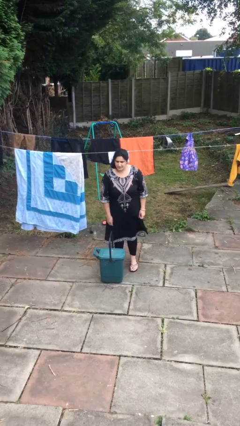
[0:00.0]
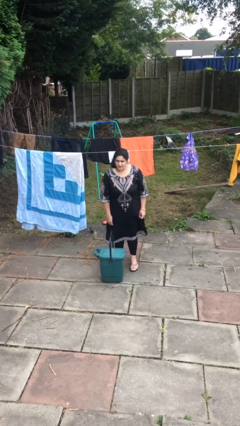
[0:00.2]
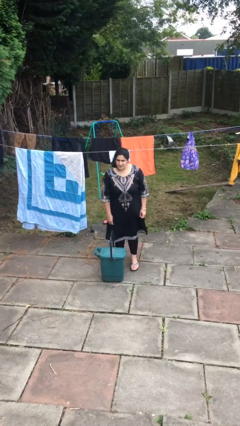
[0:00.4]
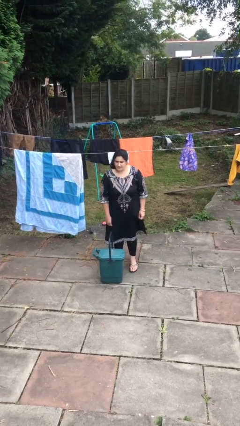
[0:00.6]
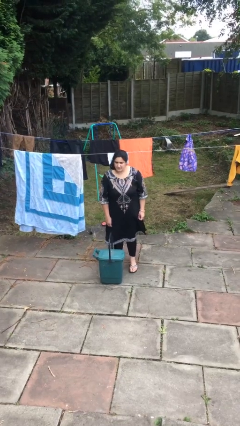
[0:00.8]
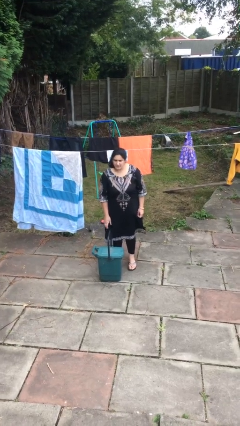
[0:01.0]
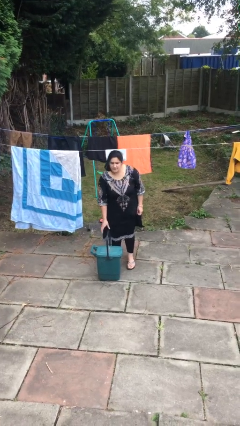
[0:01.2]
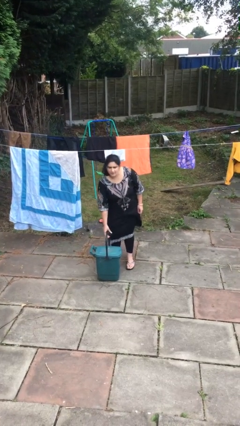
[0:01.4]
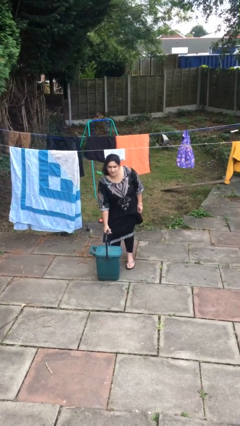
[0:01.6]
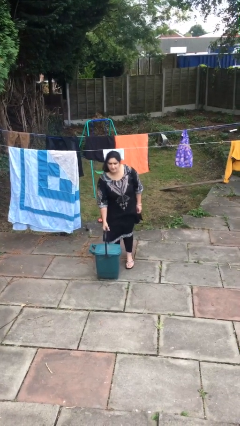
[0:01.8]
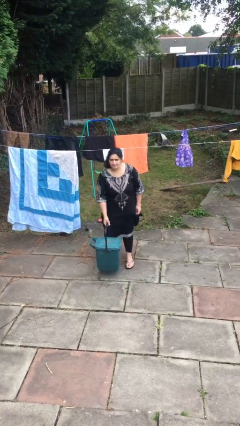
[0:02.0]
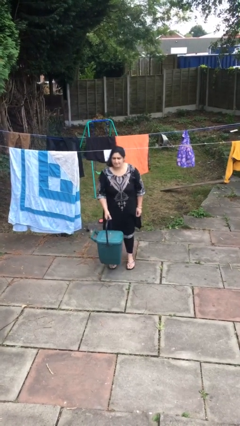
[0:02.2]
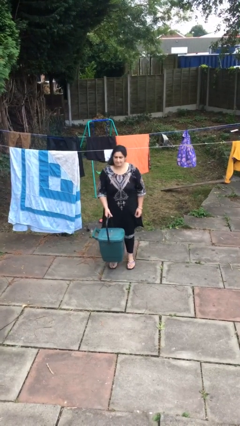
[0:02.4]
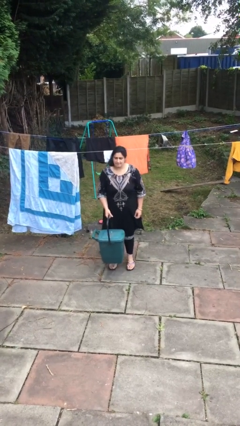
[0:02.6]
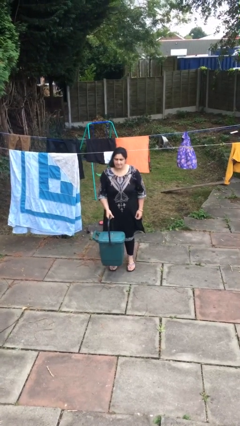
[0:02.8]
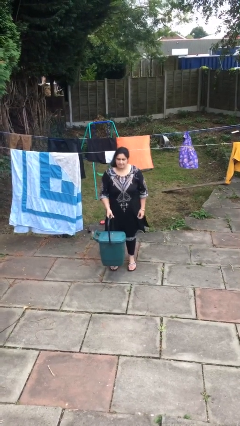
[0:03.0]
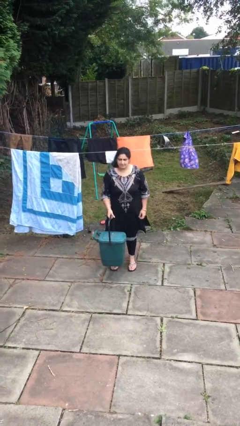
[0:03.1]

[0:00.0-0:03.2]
person picks up object from floor

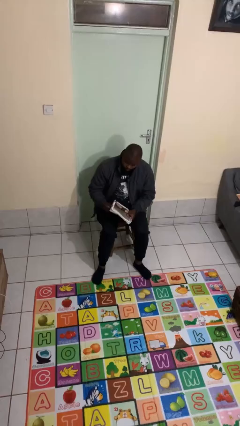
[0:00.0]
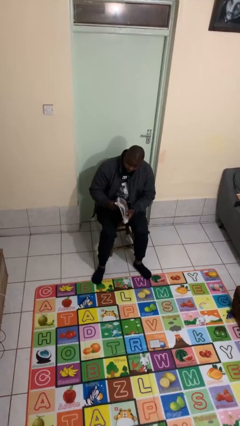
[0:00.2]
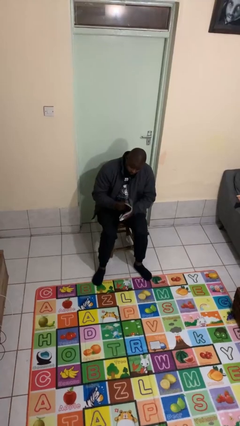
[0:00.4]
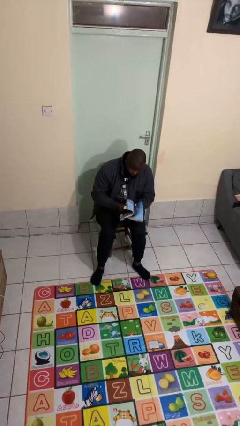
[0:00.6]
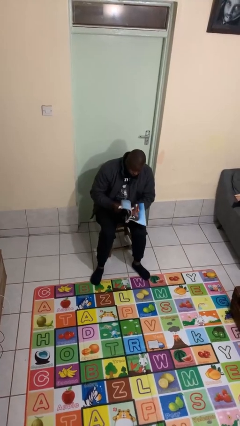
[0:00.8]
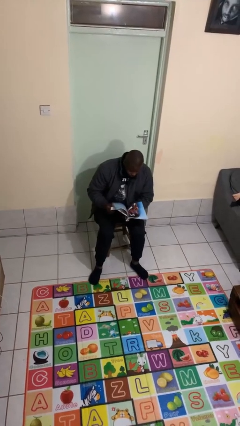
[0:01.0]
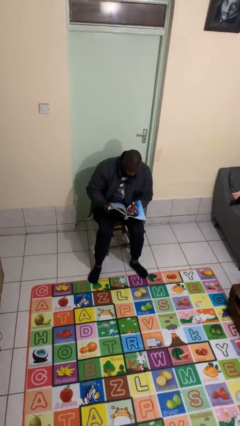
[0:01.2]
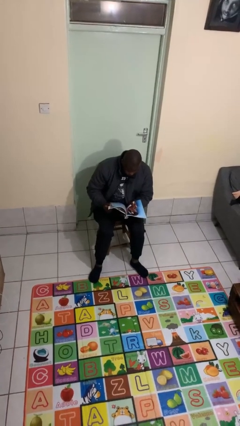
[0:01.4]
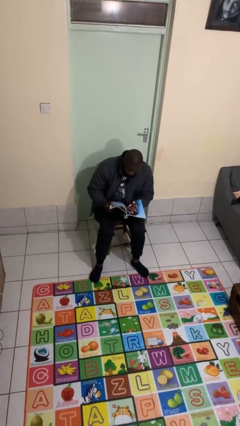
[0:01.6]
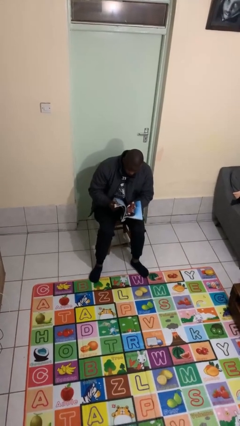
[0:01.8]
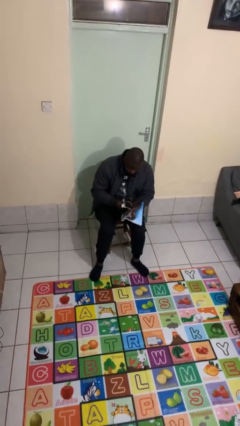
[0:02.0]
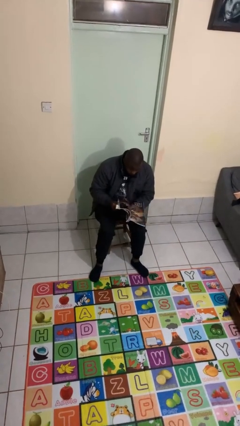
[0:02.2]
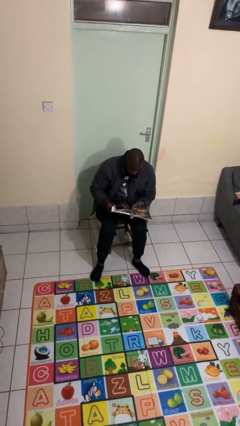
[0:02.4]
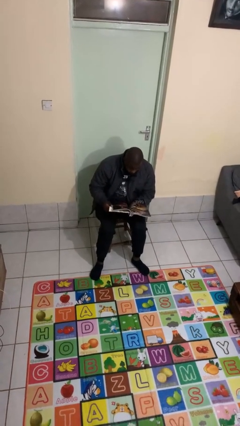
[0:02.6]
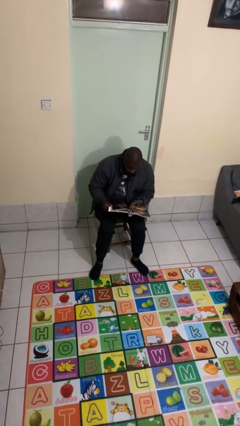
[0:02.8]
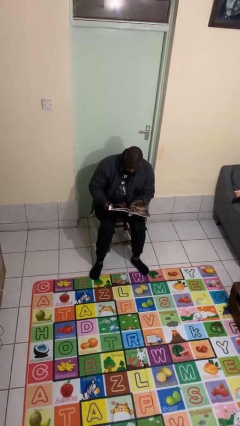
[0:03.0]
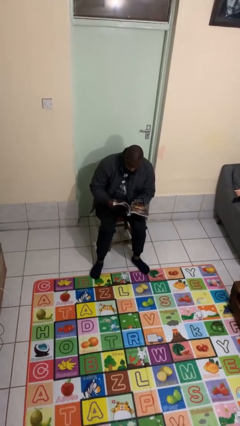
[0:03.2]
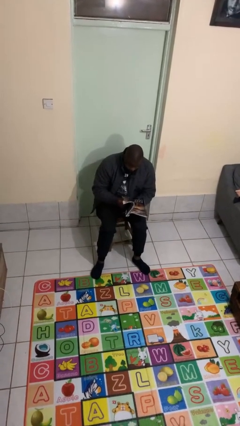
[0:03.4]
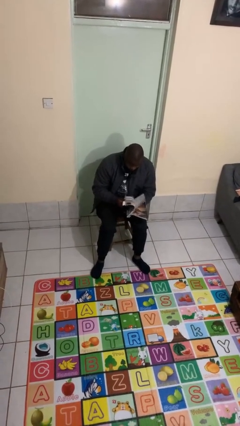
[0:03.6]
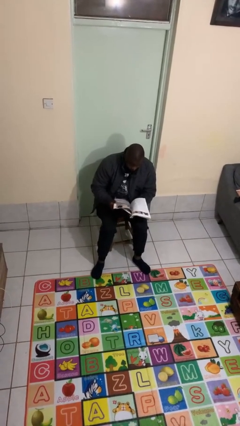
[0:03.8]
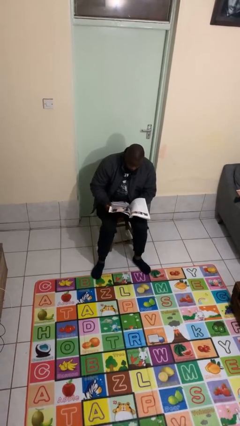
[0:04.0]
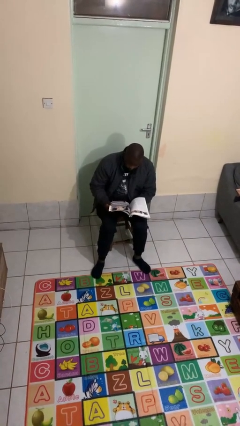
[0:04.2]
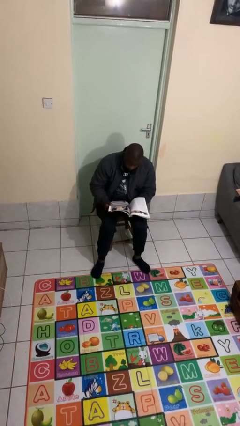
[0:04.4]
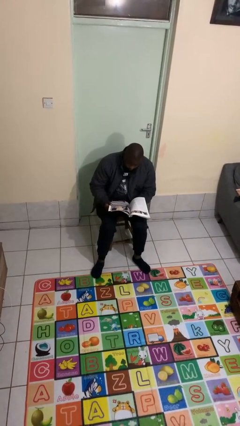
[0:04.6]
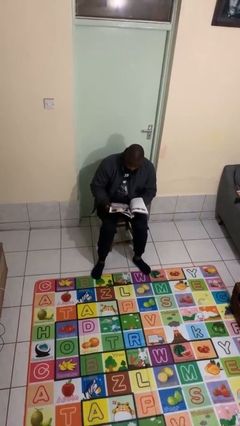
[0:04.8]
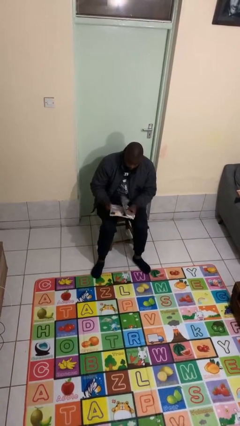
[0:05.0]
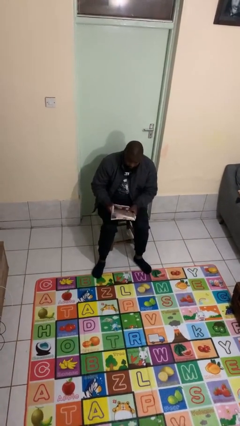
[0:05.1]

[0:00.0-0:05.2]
person reads magazine

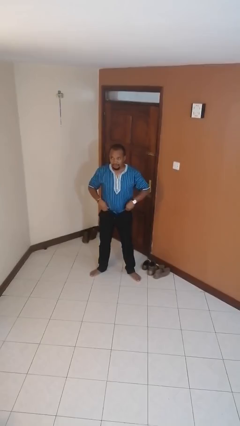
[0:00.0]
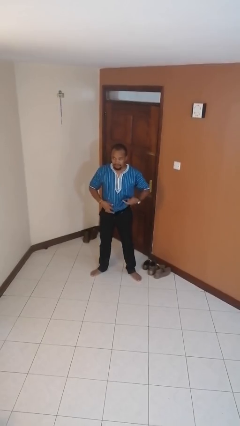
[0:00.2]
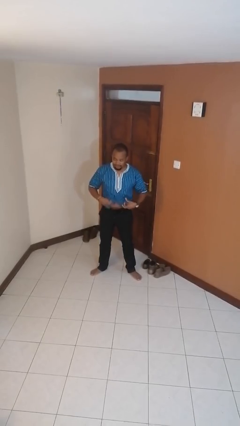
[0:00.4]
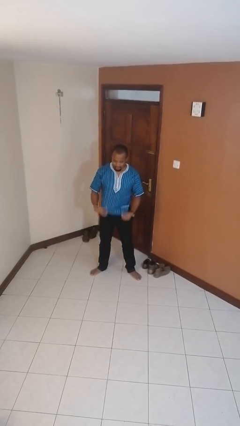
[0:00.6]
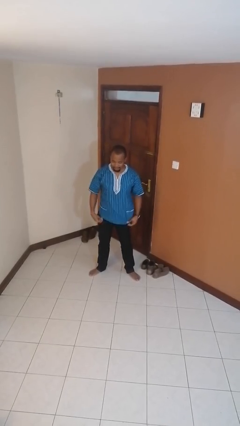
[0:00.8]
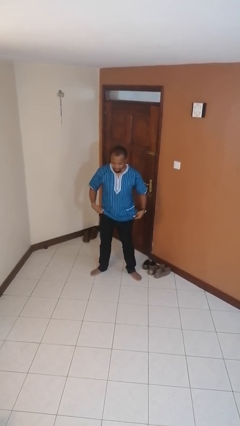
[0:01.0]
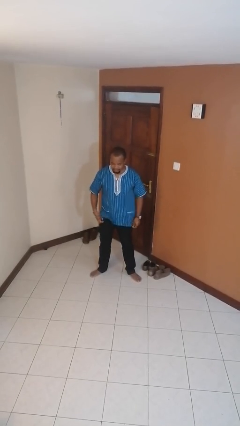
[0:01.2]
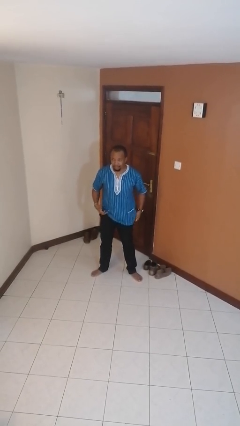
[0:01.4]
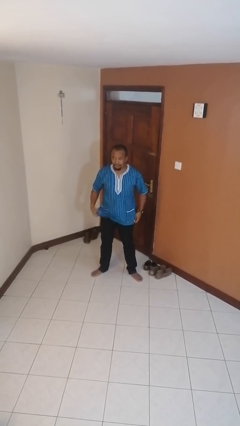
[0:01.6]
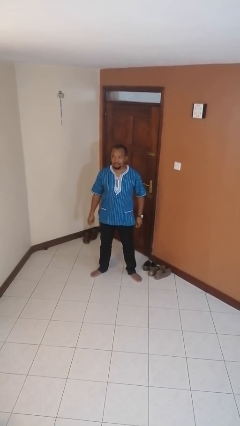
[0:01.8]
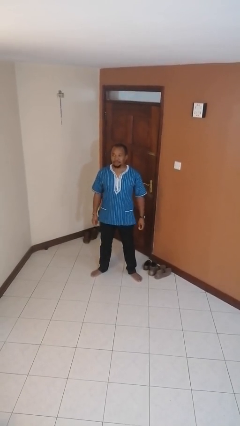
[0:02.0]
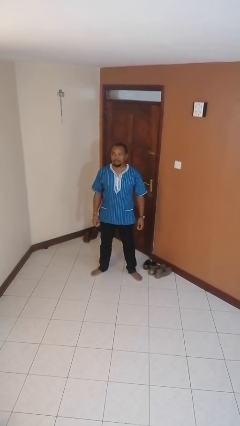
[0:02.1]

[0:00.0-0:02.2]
person untucks shirt

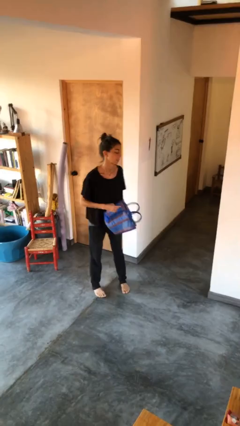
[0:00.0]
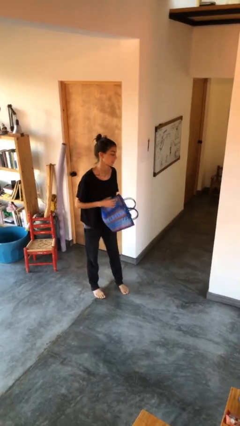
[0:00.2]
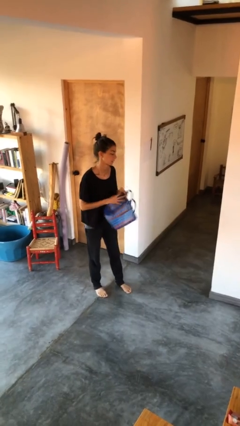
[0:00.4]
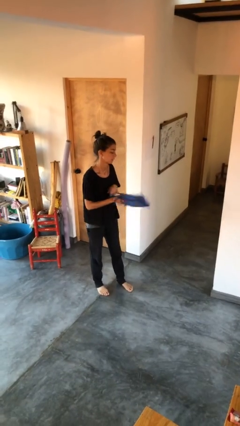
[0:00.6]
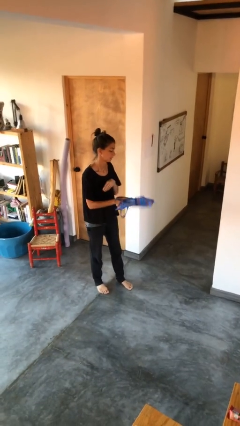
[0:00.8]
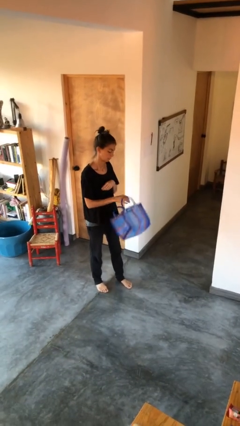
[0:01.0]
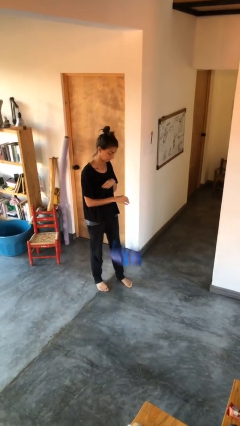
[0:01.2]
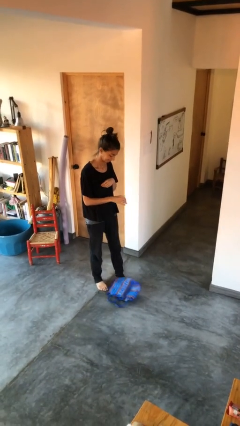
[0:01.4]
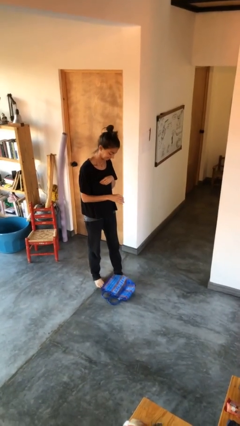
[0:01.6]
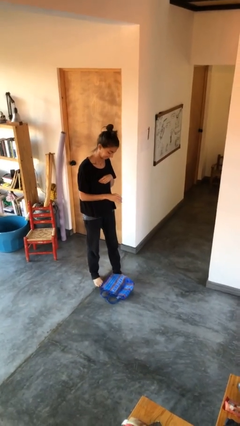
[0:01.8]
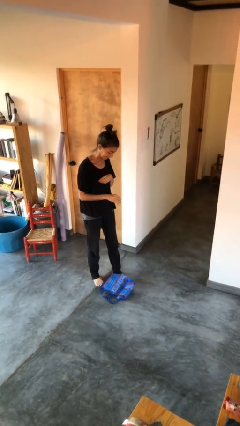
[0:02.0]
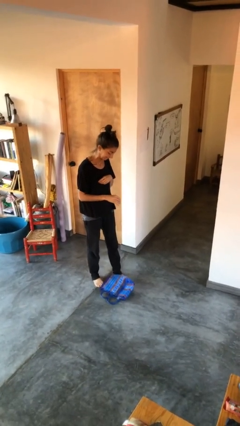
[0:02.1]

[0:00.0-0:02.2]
person drops object

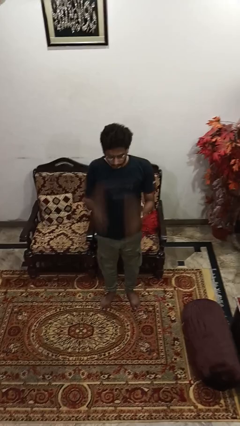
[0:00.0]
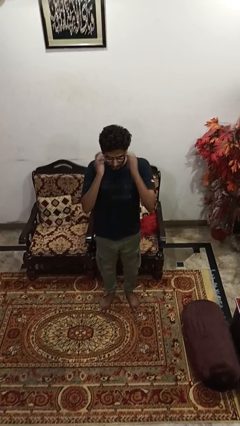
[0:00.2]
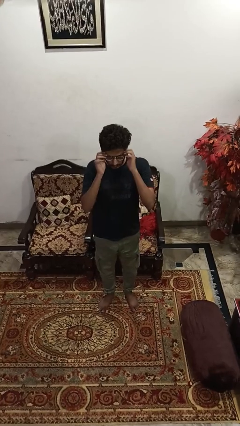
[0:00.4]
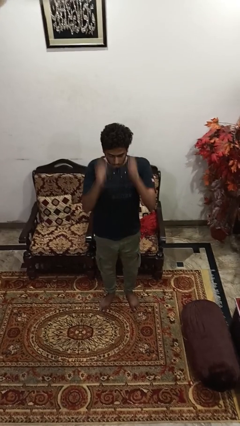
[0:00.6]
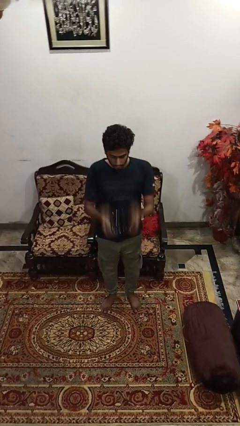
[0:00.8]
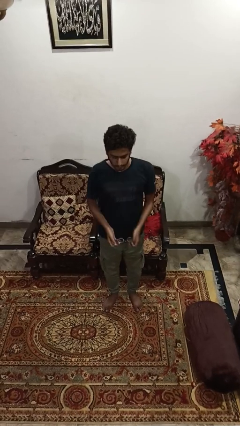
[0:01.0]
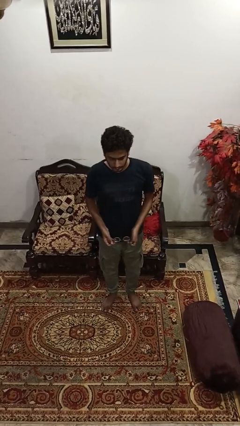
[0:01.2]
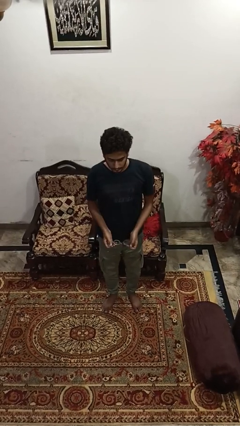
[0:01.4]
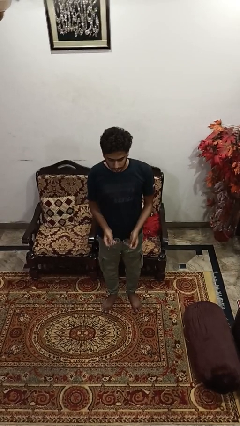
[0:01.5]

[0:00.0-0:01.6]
person takes off glasses

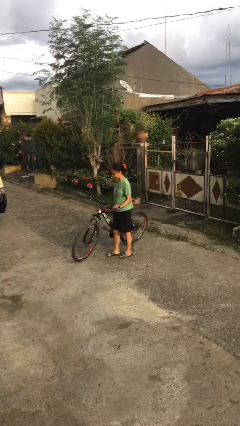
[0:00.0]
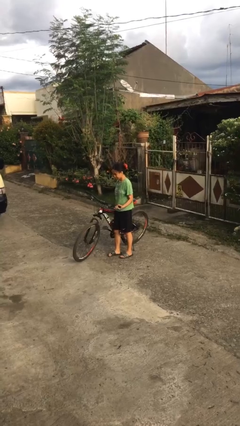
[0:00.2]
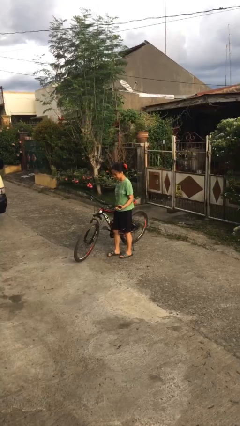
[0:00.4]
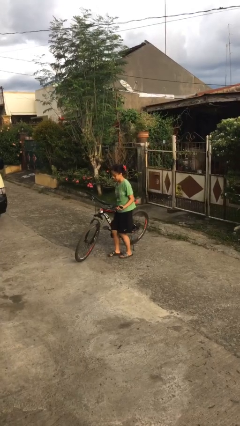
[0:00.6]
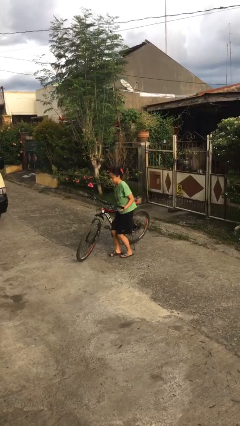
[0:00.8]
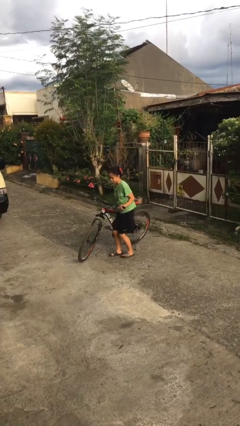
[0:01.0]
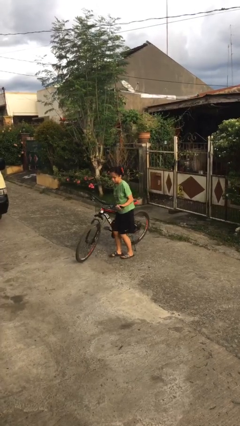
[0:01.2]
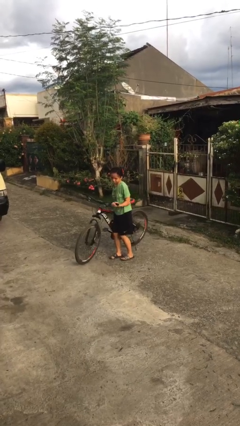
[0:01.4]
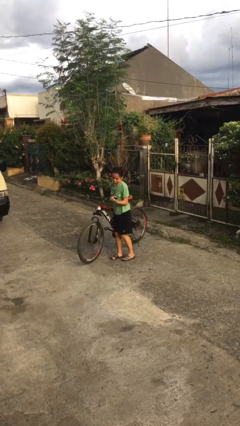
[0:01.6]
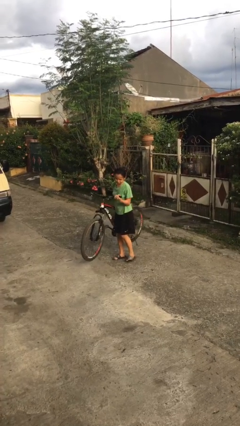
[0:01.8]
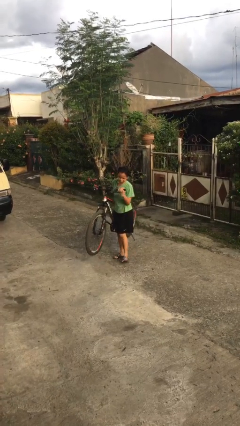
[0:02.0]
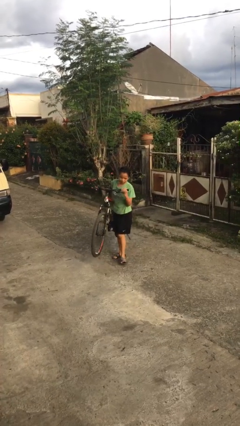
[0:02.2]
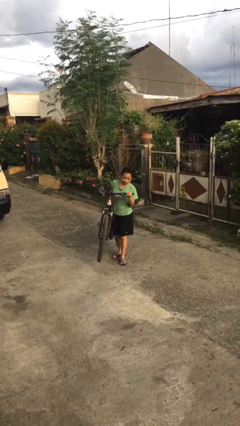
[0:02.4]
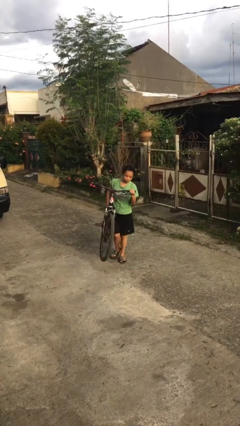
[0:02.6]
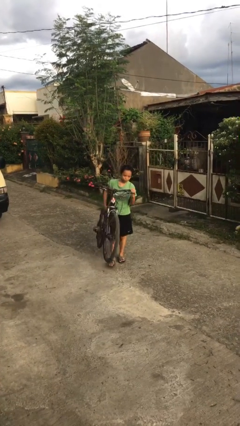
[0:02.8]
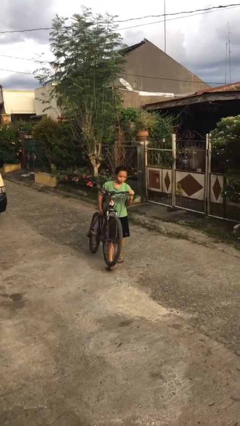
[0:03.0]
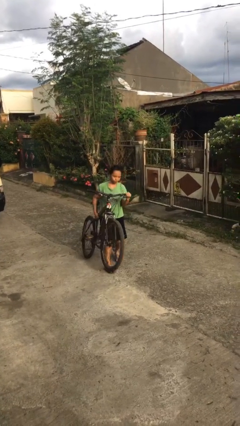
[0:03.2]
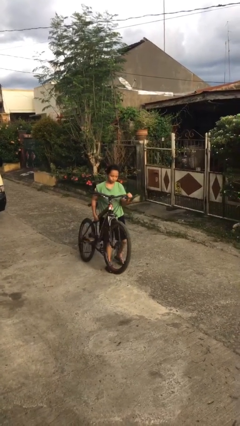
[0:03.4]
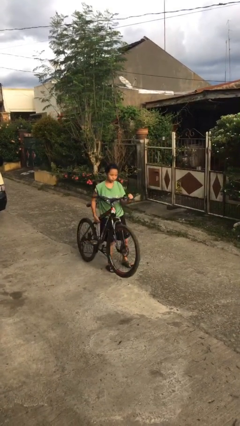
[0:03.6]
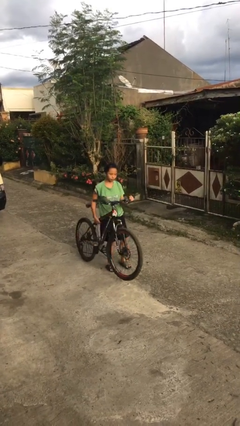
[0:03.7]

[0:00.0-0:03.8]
person carries bicycle
